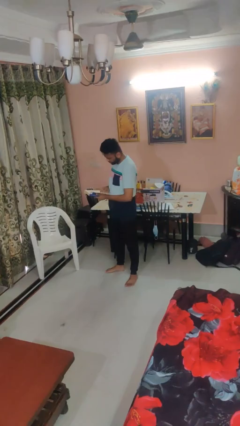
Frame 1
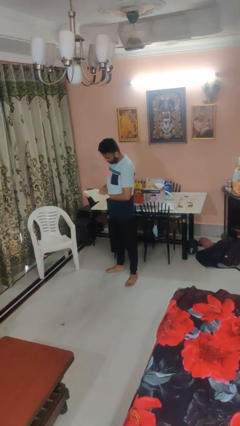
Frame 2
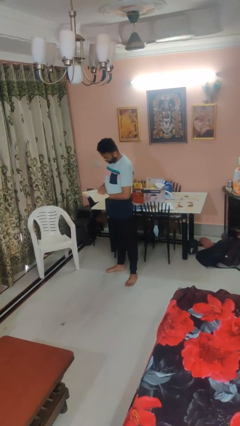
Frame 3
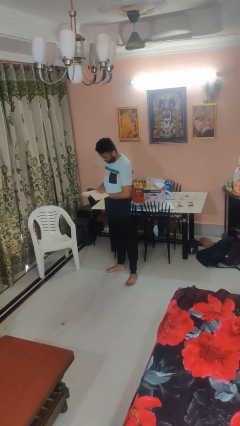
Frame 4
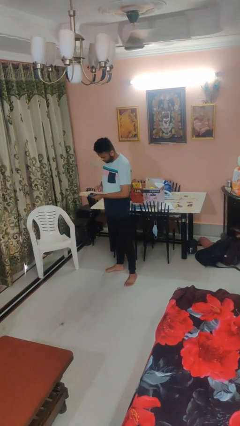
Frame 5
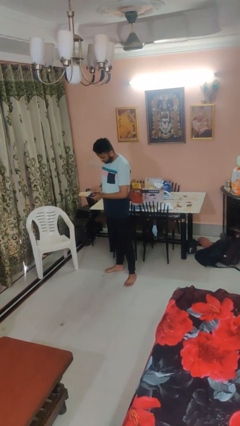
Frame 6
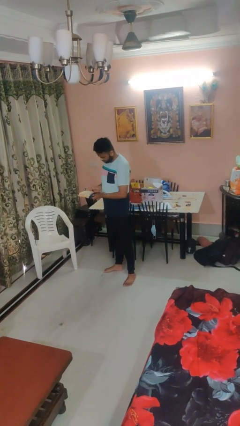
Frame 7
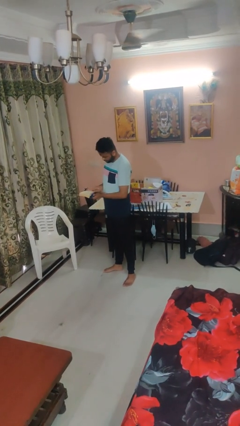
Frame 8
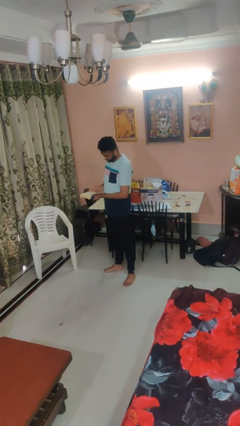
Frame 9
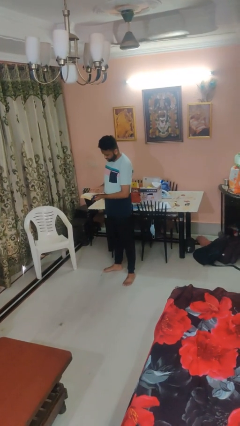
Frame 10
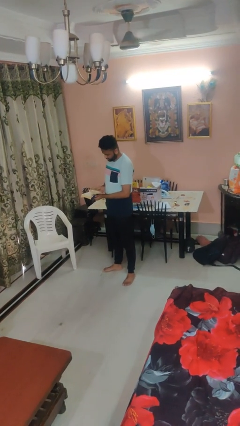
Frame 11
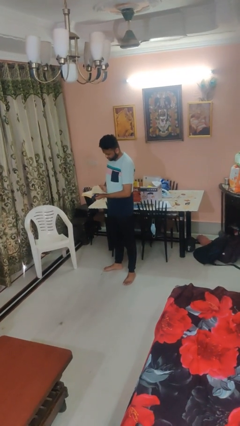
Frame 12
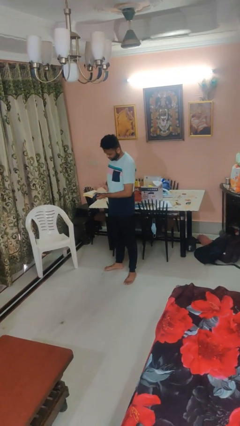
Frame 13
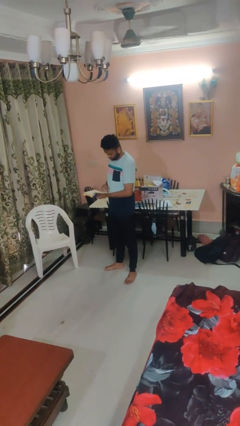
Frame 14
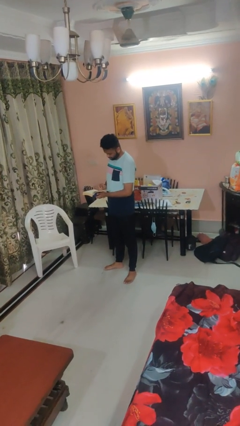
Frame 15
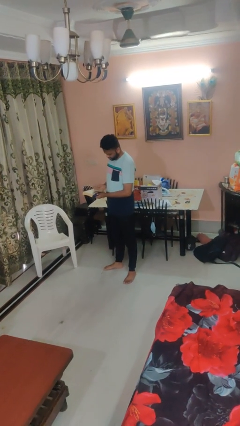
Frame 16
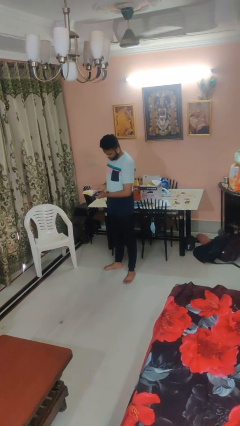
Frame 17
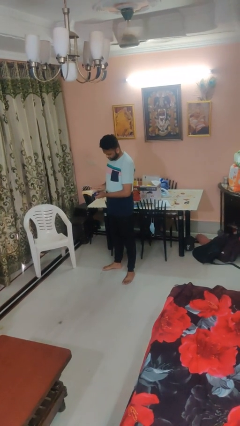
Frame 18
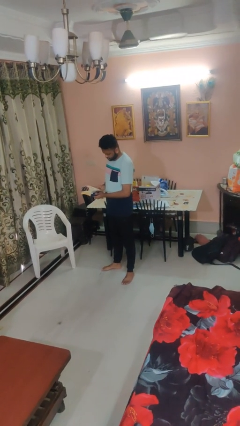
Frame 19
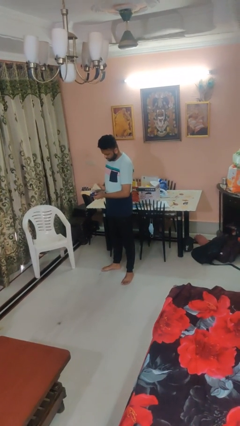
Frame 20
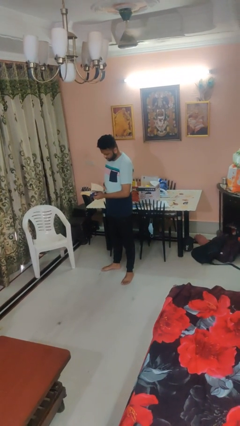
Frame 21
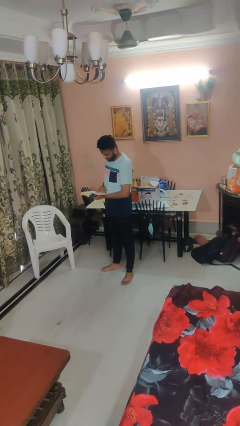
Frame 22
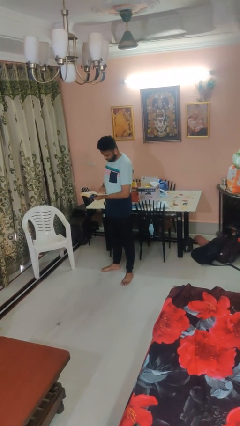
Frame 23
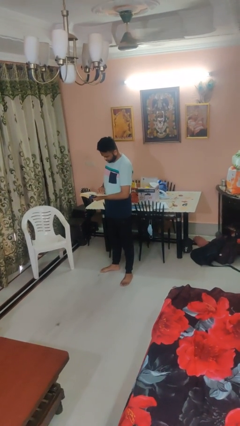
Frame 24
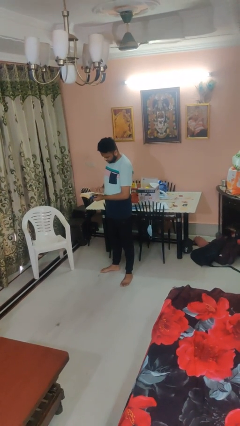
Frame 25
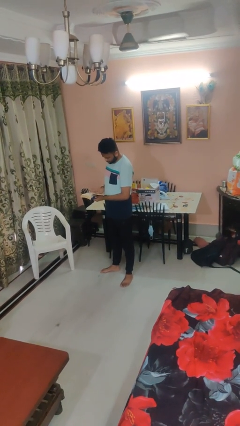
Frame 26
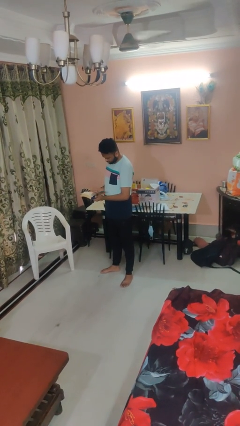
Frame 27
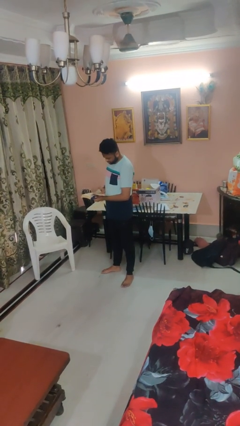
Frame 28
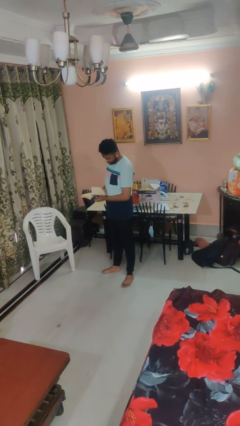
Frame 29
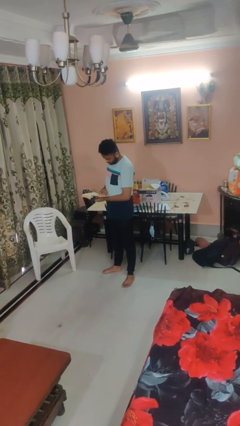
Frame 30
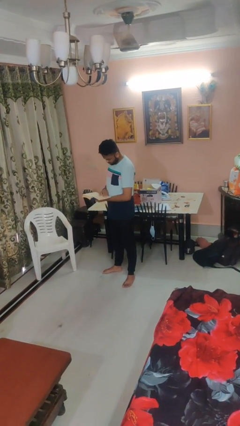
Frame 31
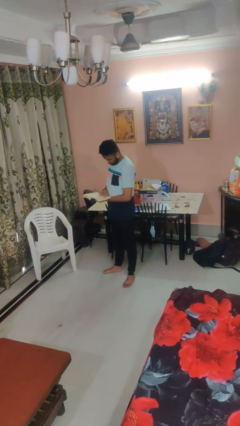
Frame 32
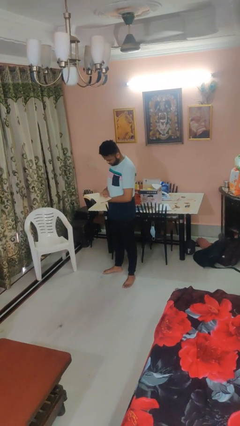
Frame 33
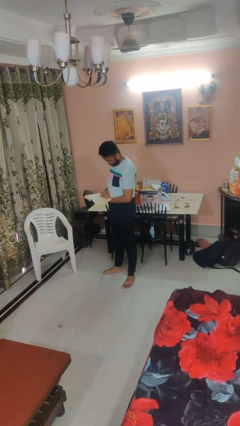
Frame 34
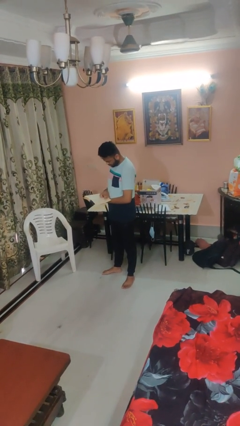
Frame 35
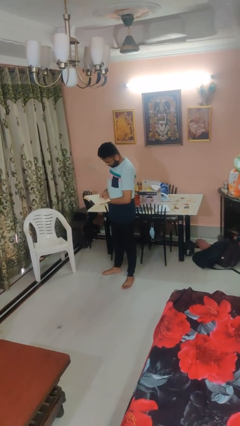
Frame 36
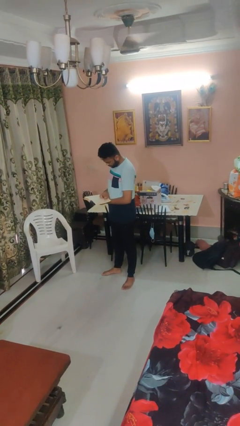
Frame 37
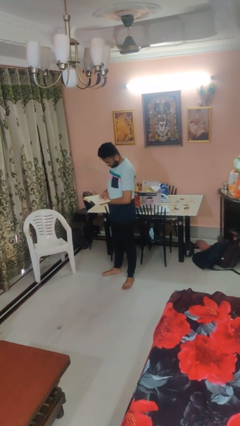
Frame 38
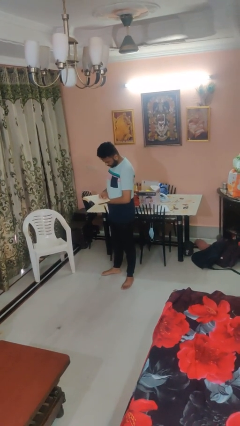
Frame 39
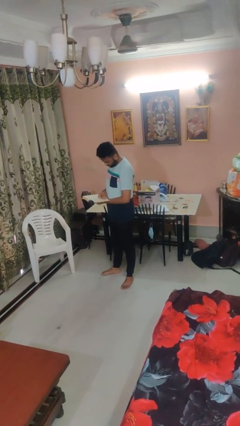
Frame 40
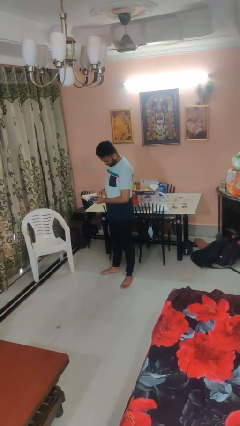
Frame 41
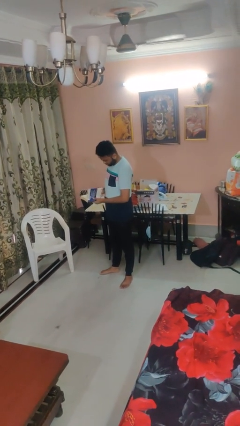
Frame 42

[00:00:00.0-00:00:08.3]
person reads book

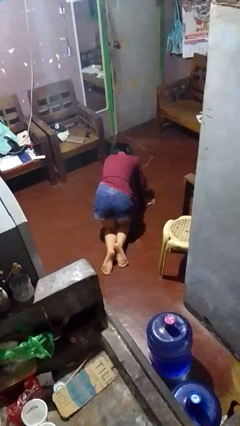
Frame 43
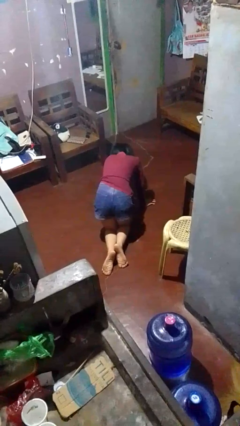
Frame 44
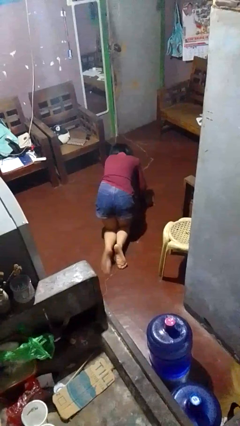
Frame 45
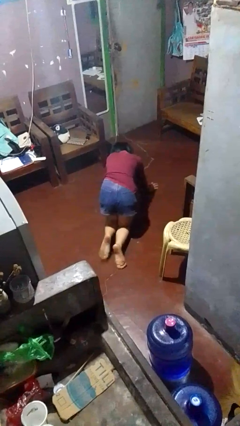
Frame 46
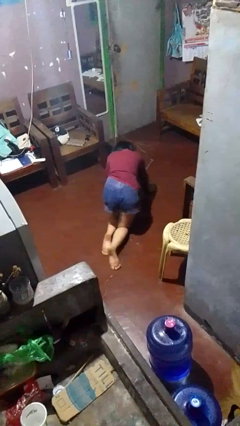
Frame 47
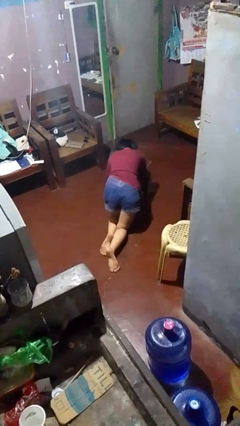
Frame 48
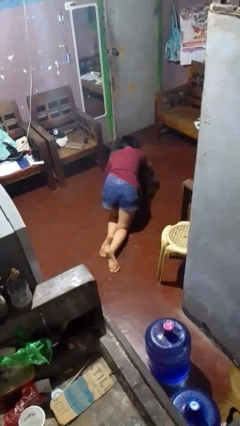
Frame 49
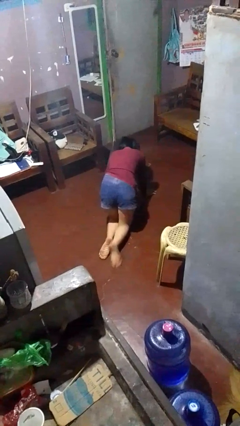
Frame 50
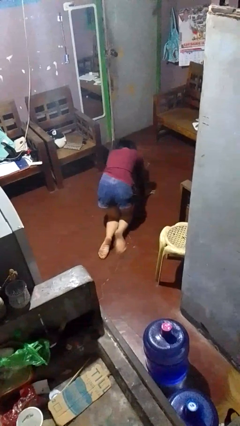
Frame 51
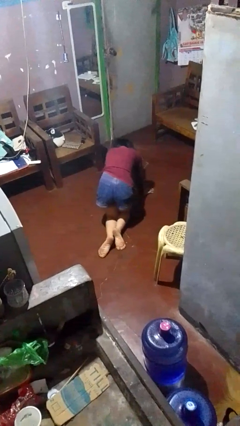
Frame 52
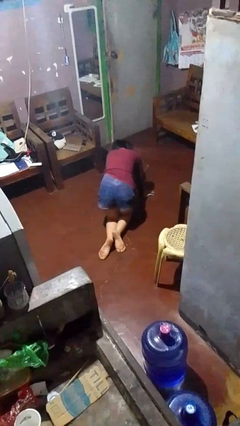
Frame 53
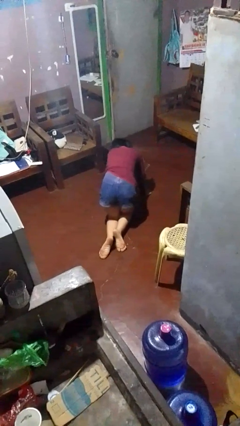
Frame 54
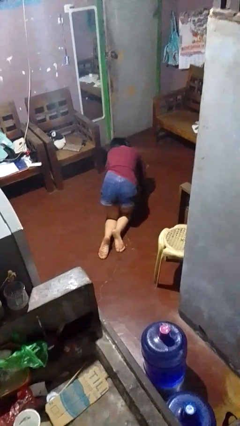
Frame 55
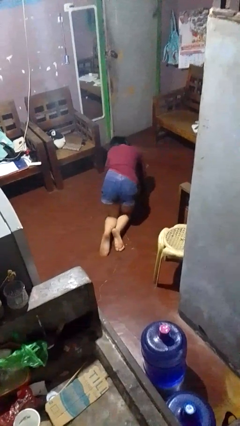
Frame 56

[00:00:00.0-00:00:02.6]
person crawls

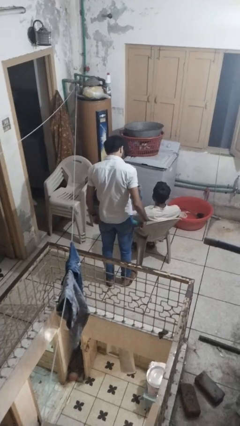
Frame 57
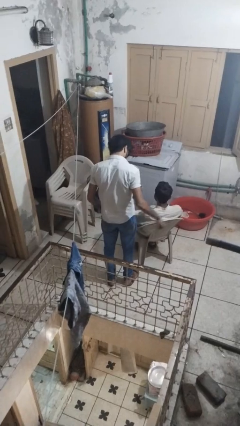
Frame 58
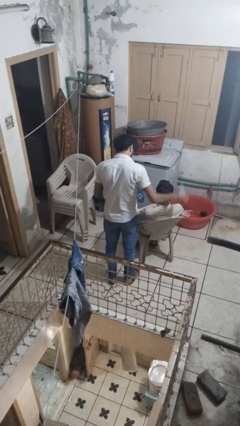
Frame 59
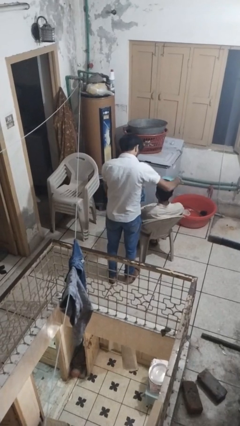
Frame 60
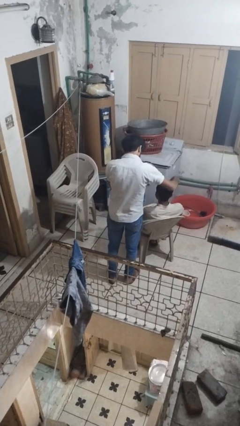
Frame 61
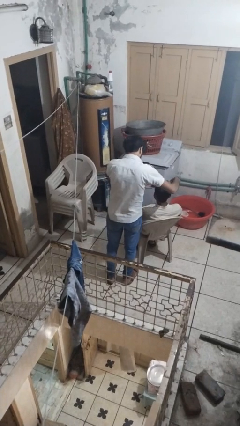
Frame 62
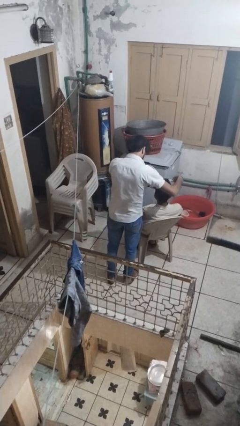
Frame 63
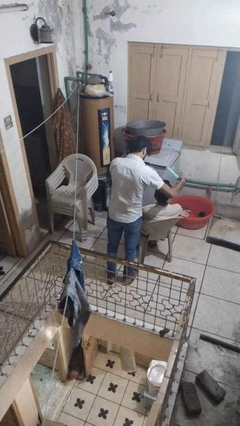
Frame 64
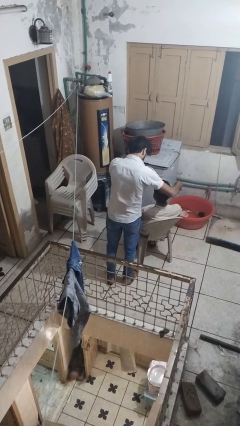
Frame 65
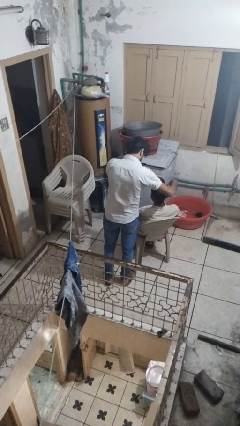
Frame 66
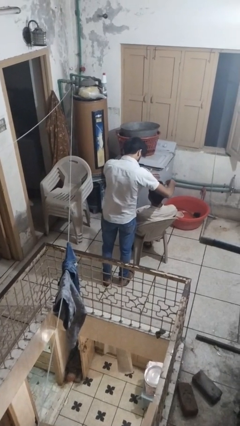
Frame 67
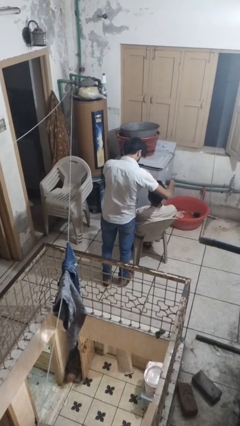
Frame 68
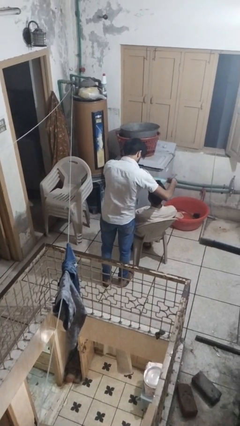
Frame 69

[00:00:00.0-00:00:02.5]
person brushes hair of person

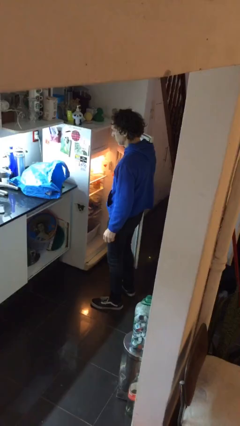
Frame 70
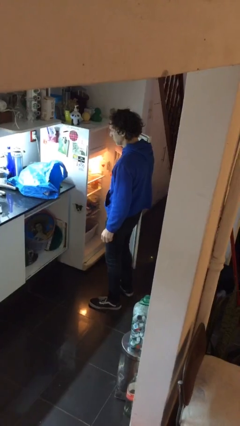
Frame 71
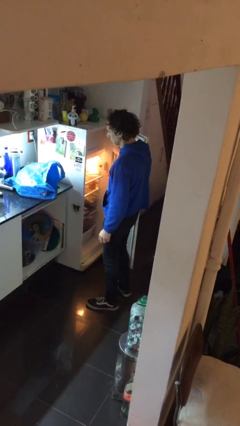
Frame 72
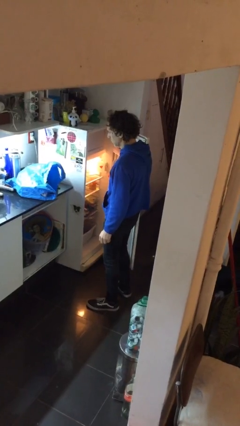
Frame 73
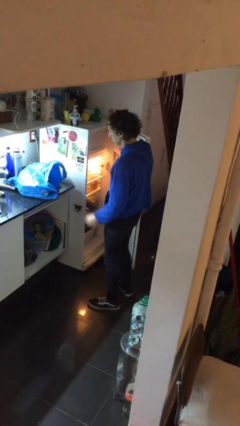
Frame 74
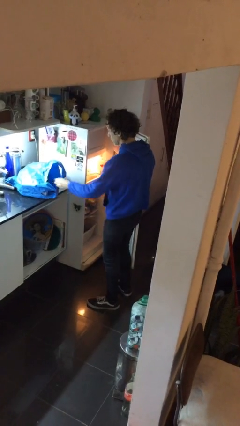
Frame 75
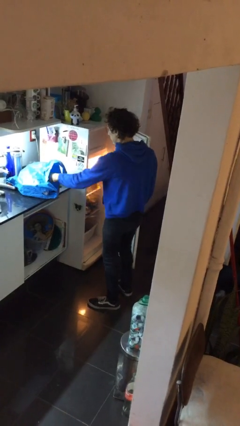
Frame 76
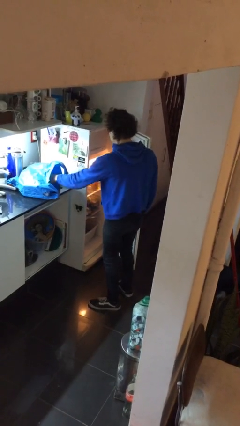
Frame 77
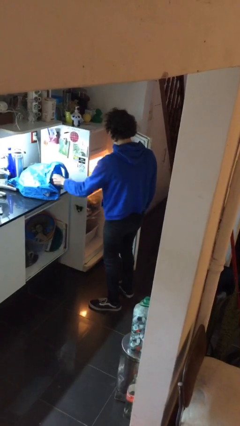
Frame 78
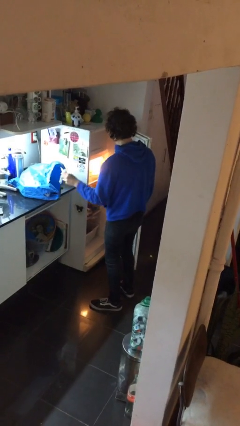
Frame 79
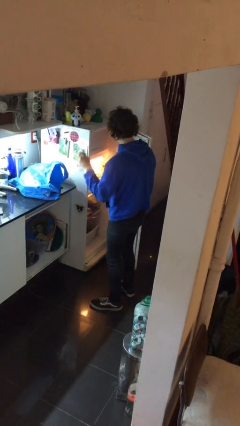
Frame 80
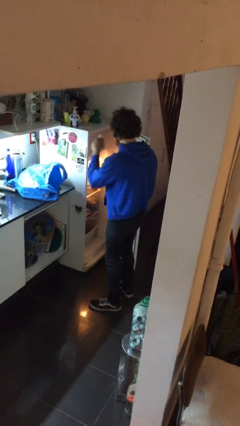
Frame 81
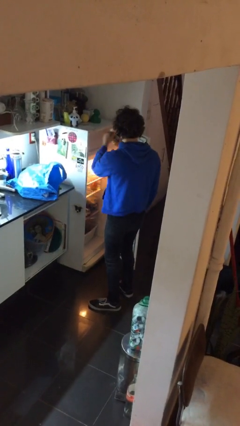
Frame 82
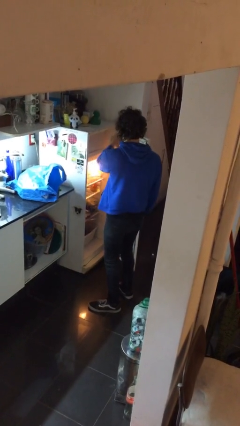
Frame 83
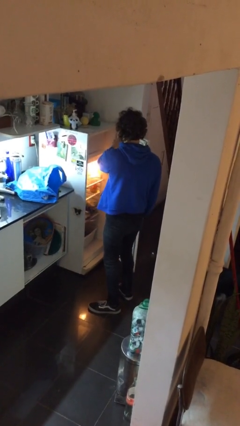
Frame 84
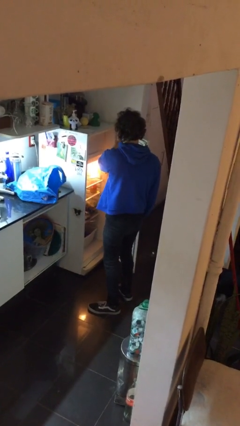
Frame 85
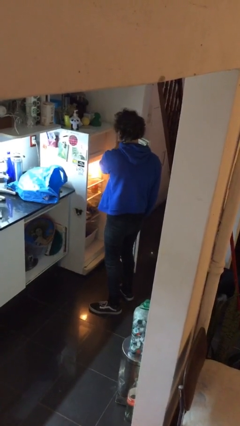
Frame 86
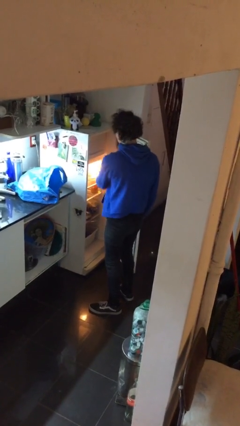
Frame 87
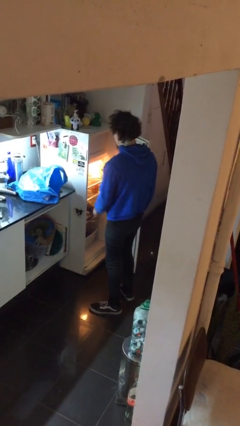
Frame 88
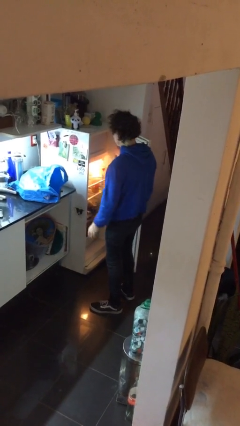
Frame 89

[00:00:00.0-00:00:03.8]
person loads groceries into refrigerator

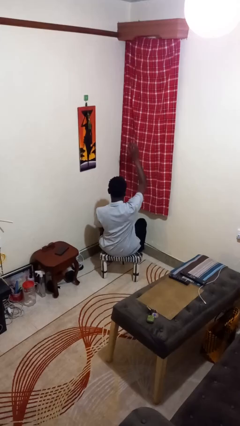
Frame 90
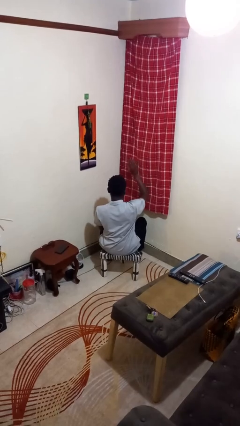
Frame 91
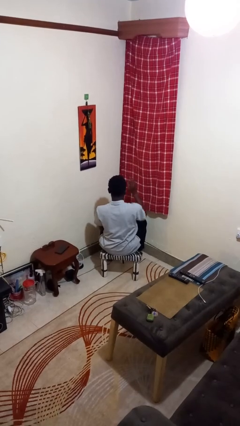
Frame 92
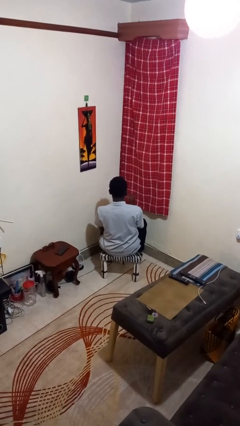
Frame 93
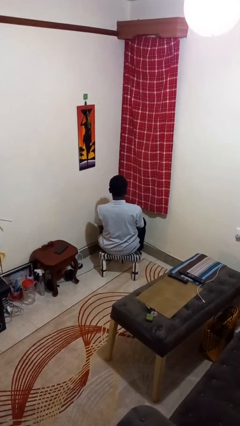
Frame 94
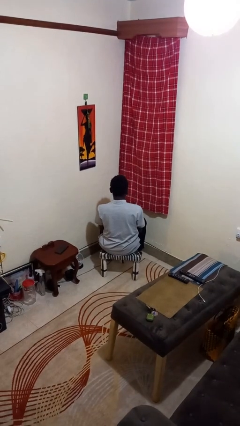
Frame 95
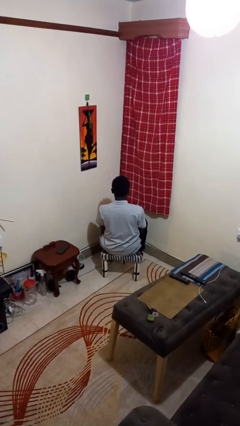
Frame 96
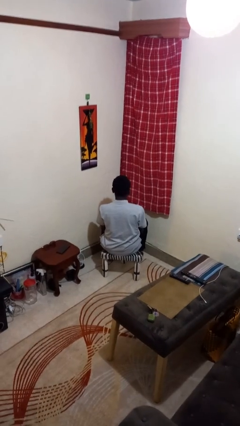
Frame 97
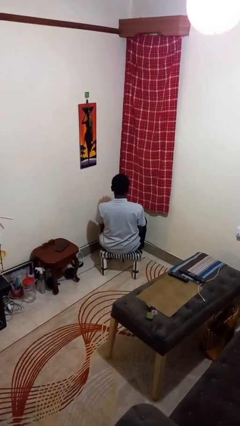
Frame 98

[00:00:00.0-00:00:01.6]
person gestures lower hand
